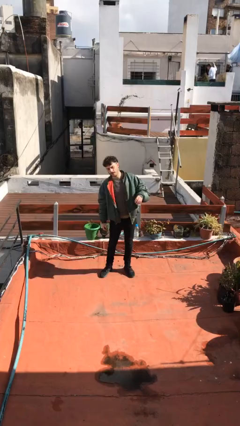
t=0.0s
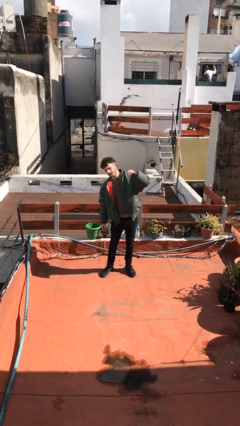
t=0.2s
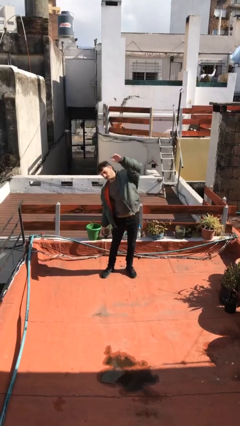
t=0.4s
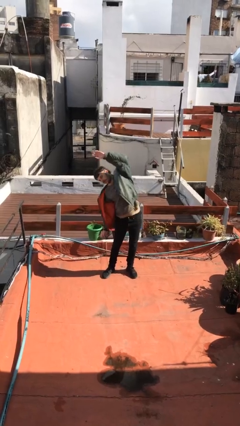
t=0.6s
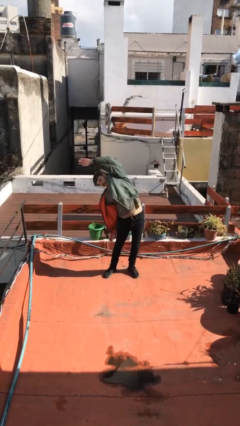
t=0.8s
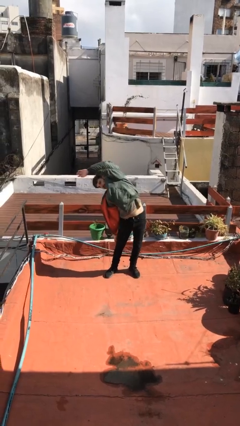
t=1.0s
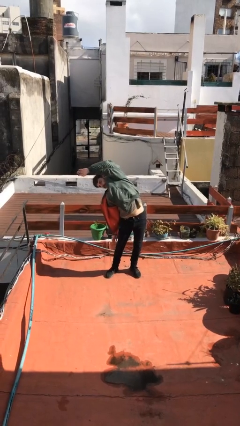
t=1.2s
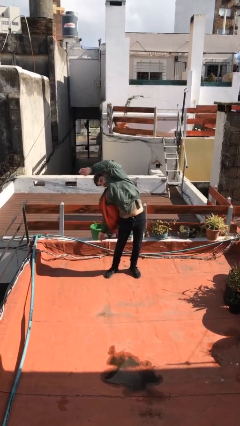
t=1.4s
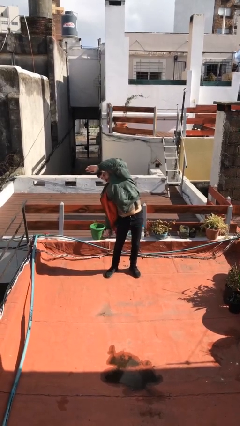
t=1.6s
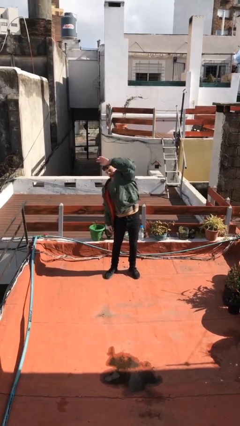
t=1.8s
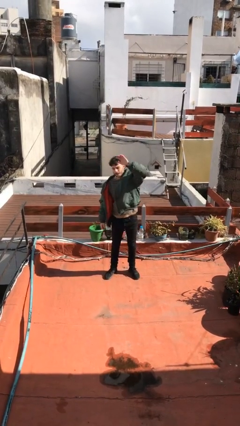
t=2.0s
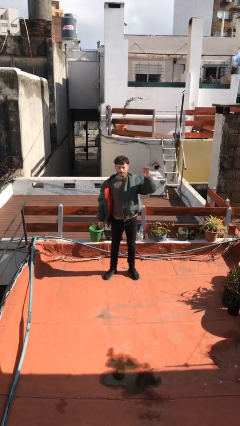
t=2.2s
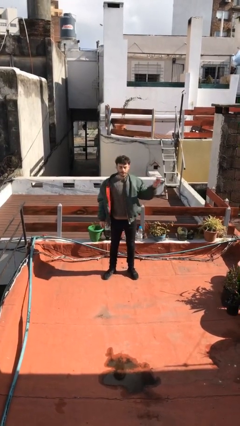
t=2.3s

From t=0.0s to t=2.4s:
person stretches arms to side

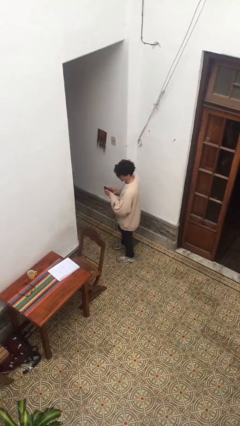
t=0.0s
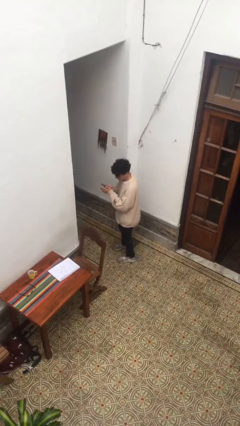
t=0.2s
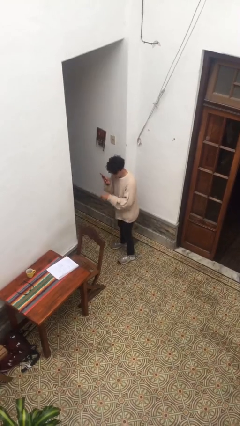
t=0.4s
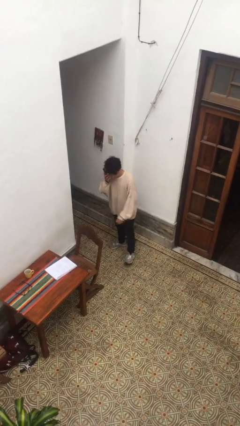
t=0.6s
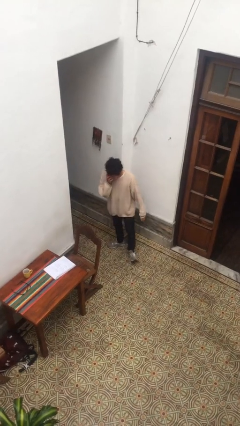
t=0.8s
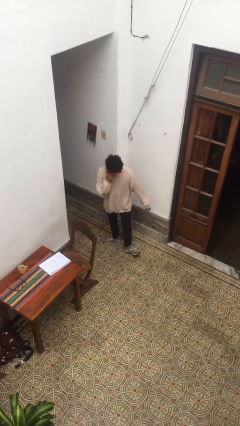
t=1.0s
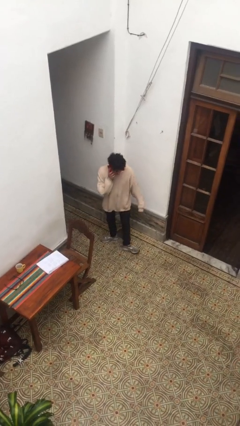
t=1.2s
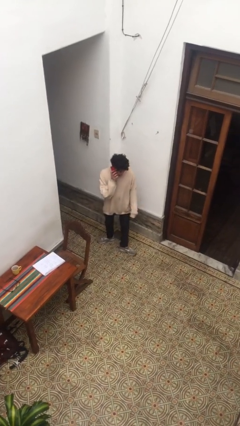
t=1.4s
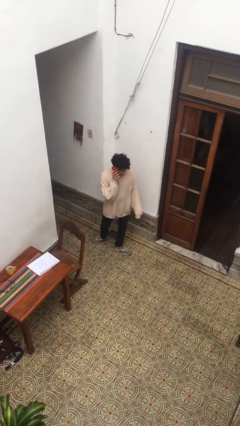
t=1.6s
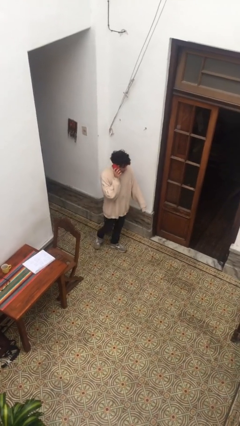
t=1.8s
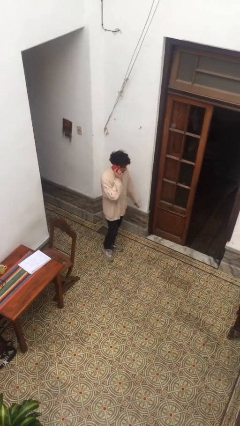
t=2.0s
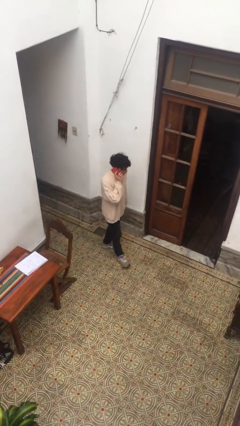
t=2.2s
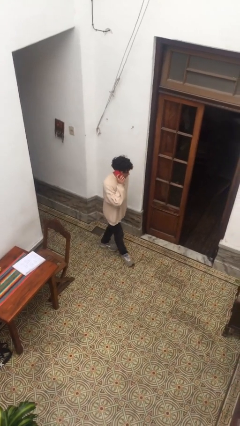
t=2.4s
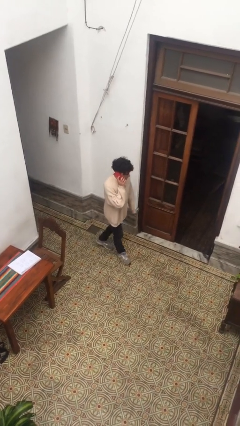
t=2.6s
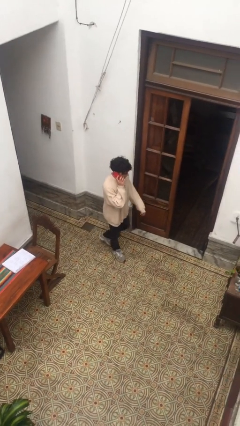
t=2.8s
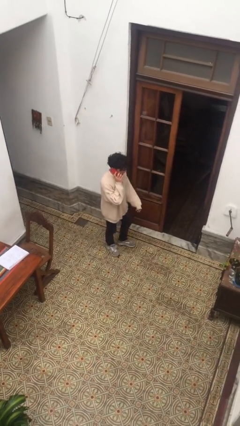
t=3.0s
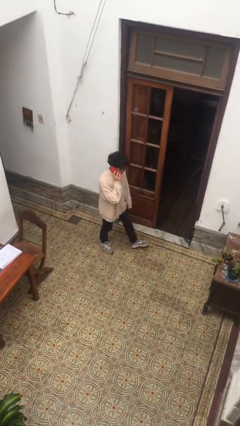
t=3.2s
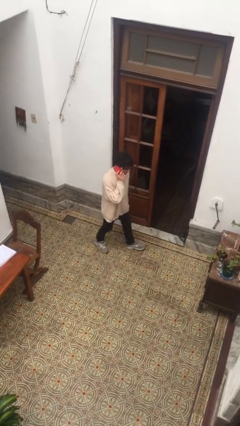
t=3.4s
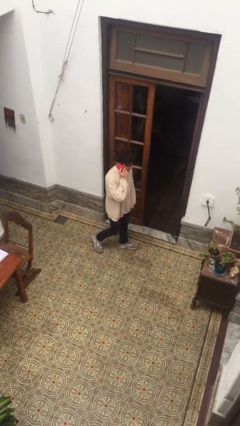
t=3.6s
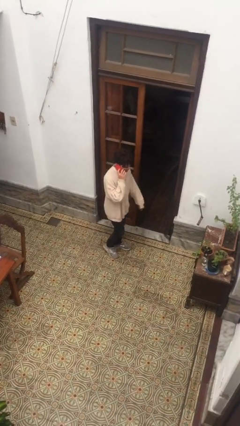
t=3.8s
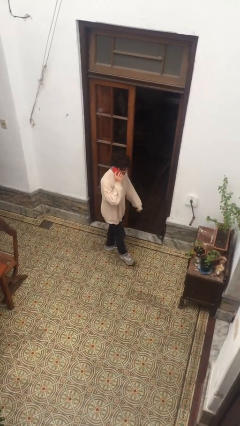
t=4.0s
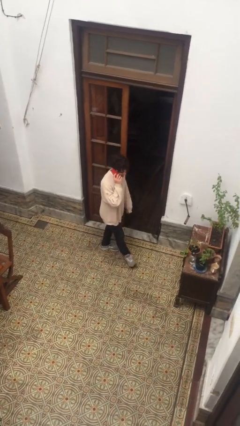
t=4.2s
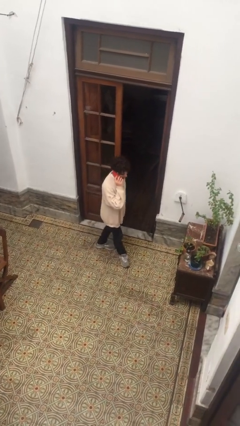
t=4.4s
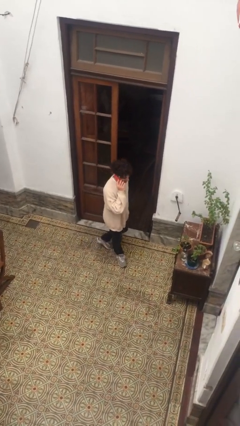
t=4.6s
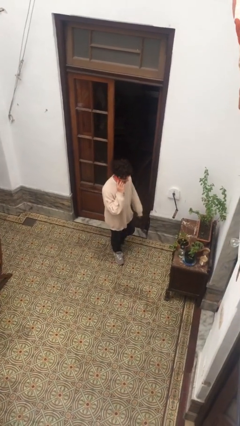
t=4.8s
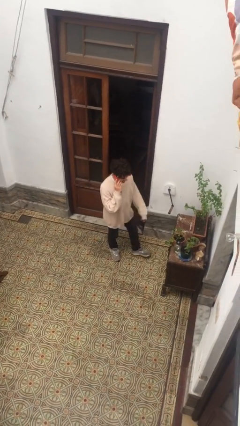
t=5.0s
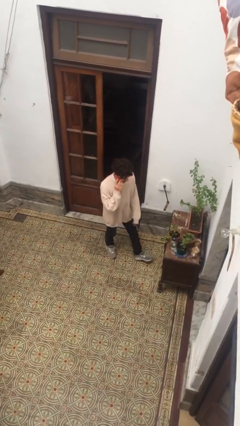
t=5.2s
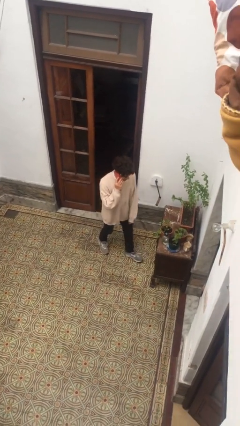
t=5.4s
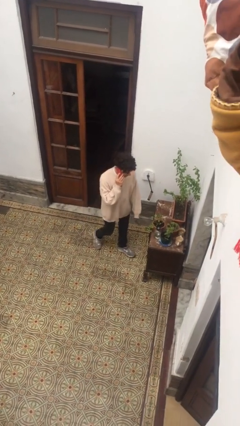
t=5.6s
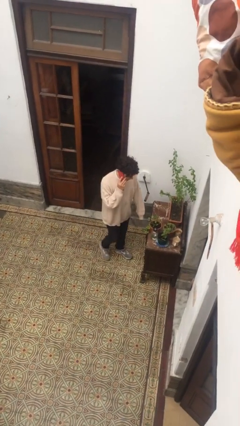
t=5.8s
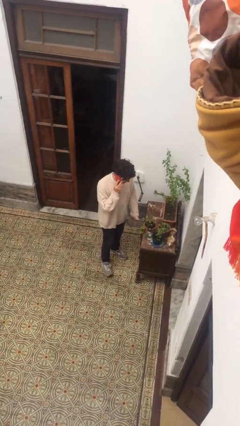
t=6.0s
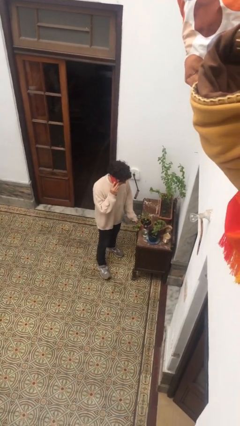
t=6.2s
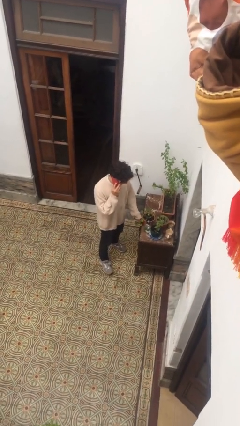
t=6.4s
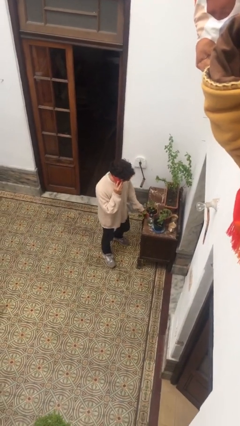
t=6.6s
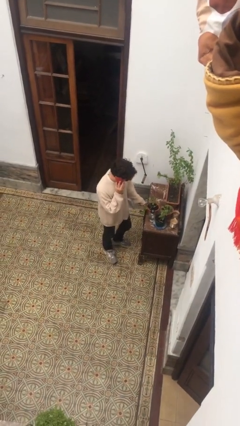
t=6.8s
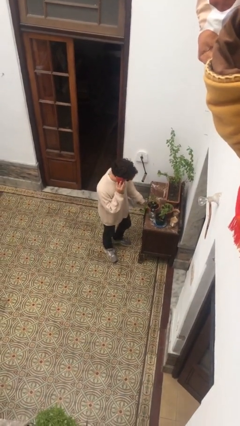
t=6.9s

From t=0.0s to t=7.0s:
person talks on phone

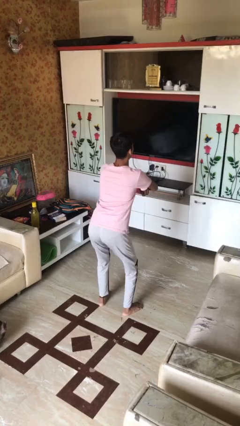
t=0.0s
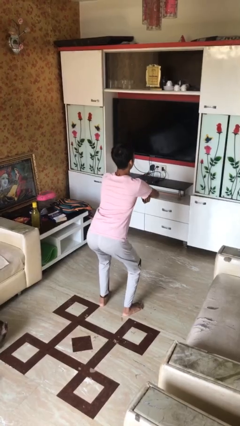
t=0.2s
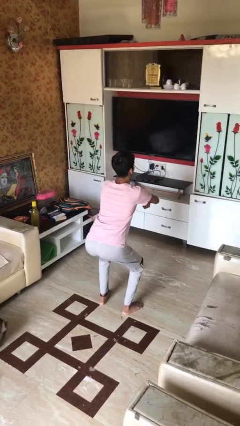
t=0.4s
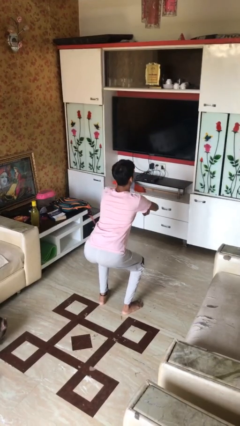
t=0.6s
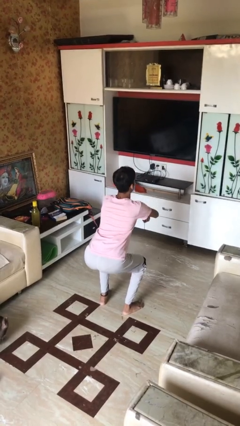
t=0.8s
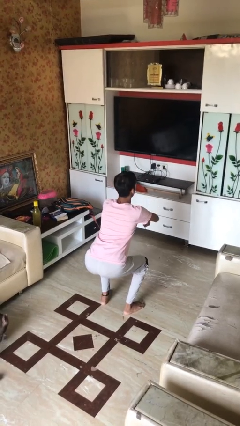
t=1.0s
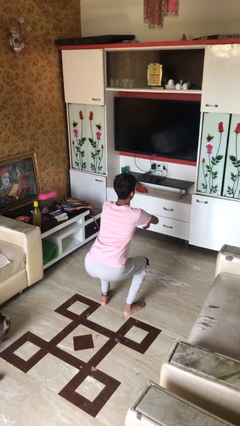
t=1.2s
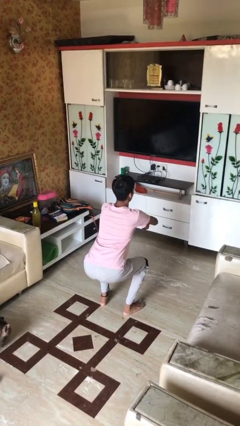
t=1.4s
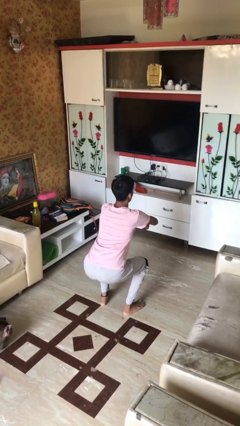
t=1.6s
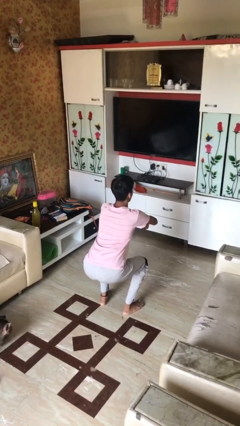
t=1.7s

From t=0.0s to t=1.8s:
person squats

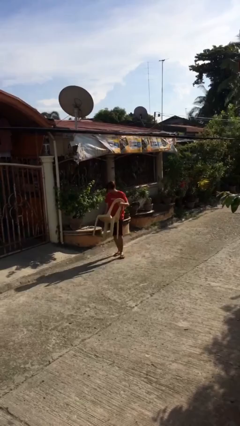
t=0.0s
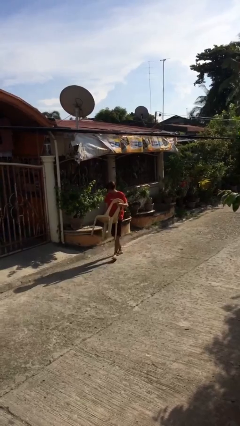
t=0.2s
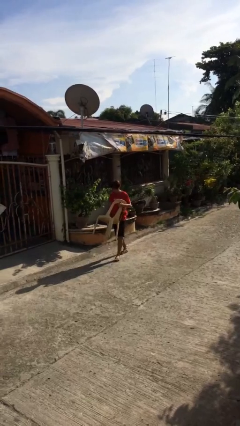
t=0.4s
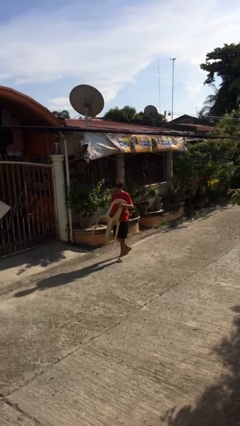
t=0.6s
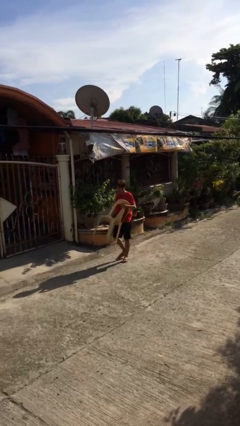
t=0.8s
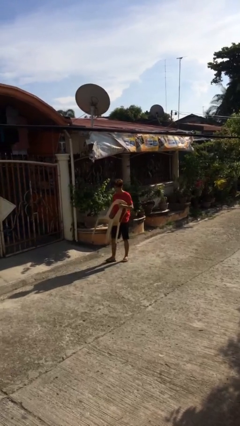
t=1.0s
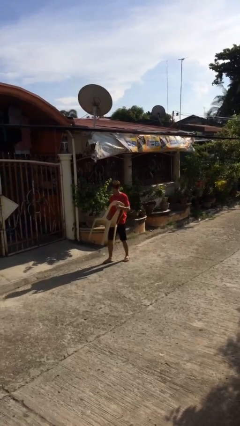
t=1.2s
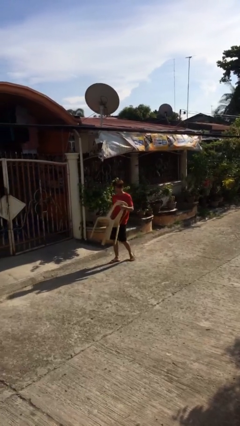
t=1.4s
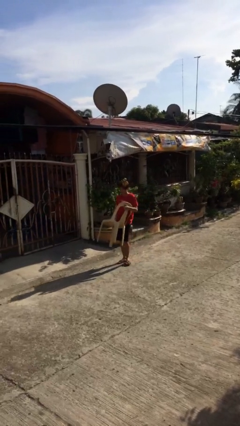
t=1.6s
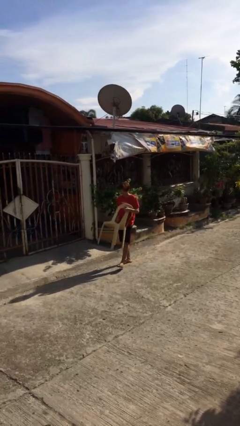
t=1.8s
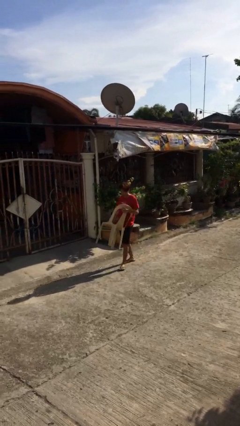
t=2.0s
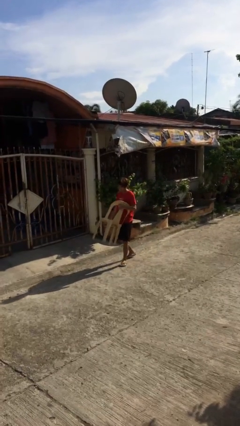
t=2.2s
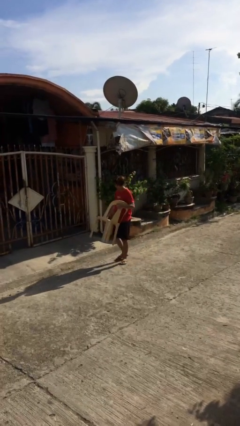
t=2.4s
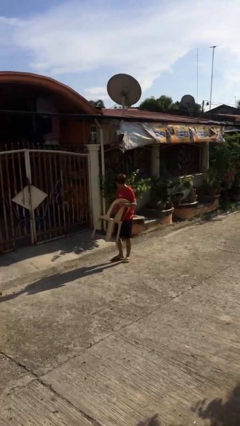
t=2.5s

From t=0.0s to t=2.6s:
person carries heavy object

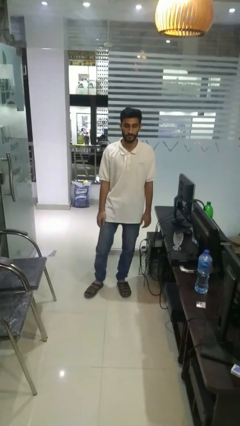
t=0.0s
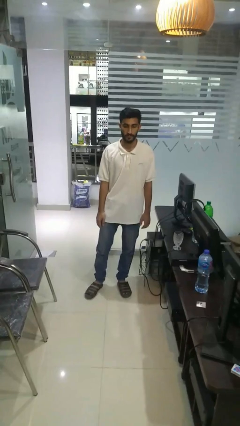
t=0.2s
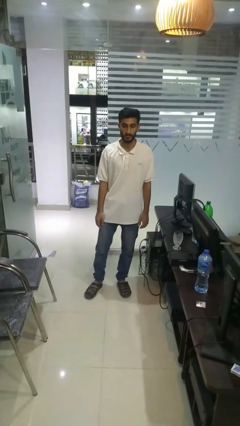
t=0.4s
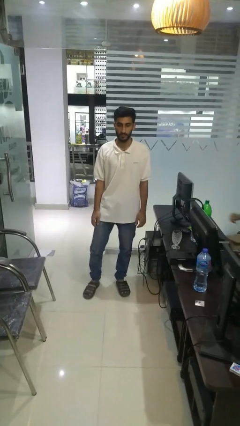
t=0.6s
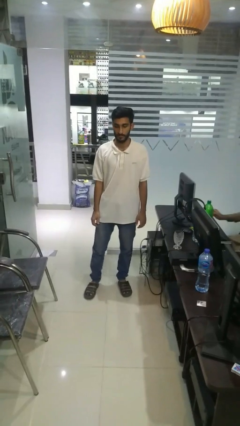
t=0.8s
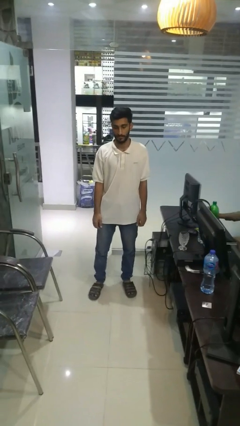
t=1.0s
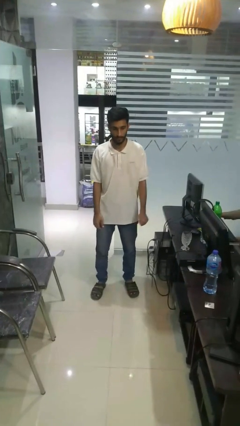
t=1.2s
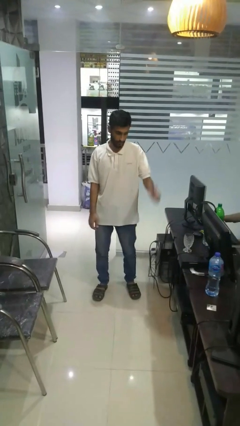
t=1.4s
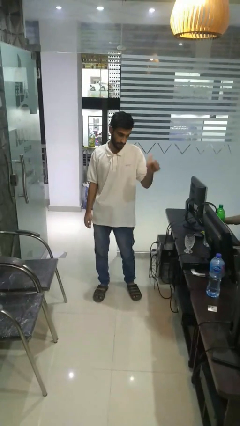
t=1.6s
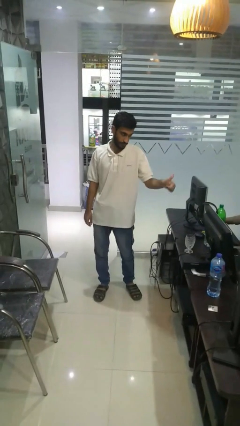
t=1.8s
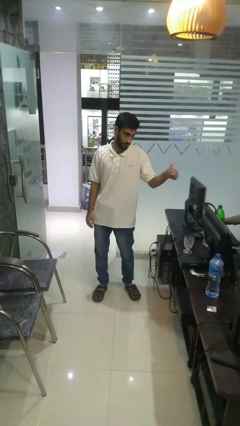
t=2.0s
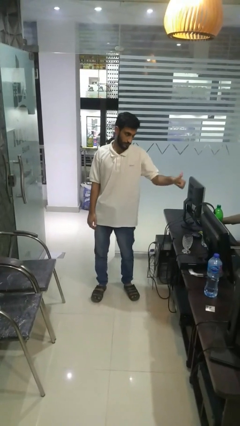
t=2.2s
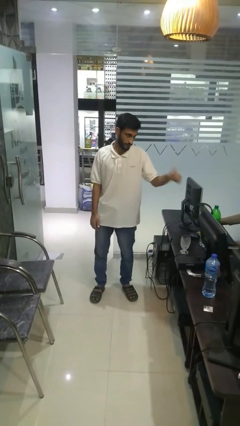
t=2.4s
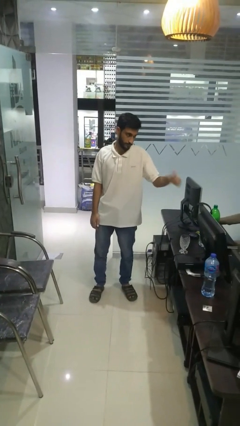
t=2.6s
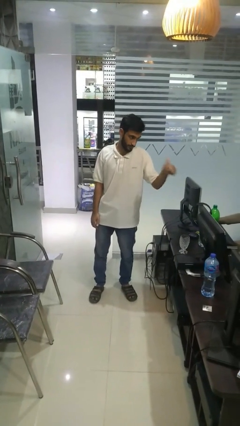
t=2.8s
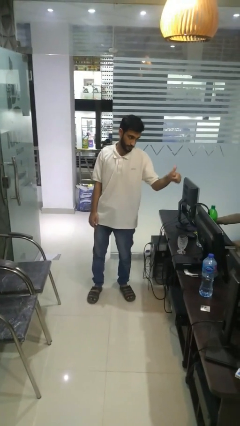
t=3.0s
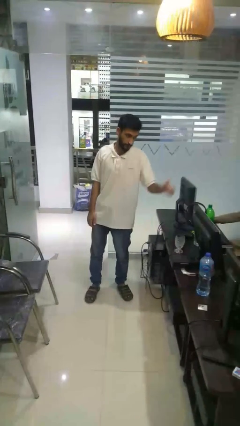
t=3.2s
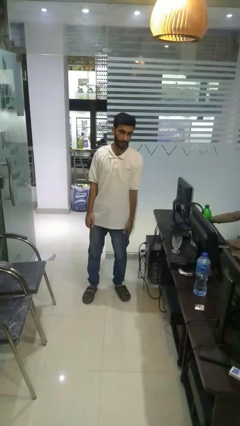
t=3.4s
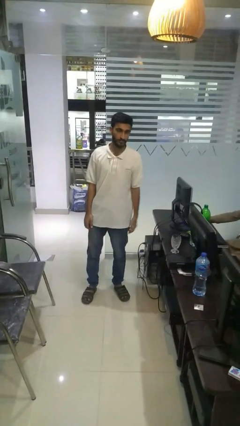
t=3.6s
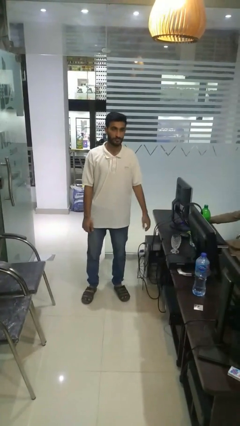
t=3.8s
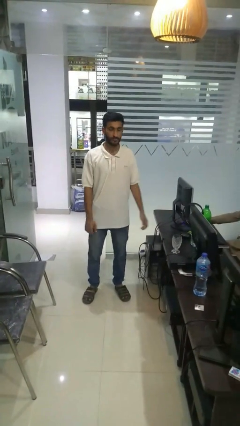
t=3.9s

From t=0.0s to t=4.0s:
person gestures thumbs up
